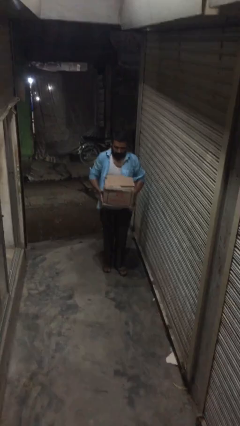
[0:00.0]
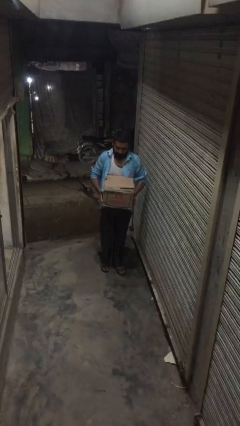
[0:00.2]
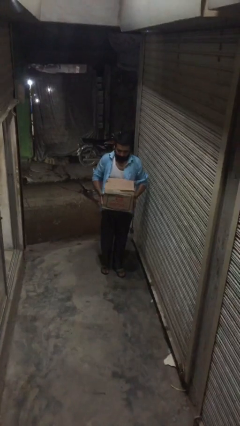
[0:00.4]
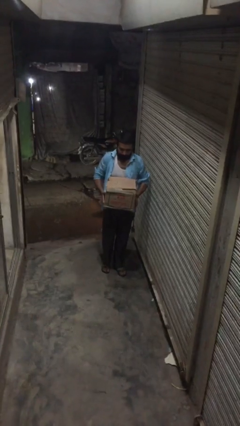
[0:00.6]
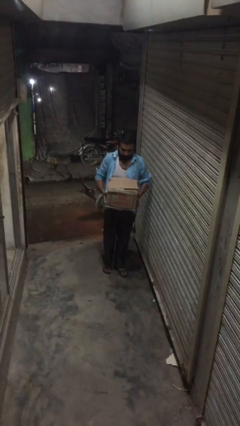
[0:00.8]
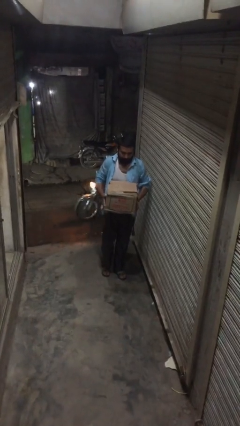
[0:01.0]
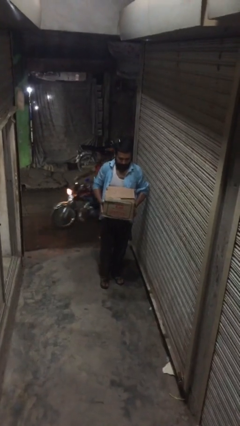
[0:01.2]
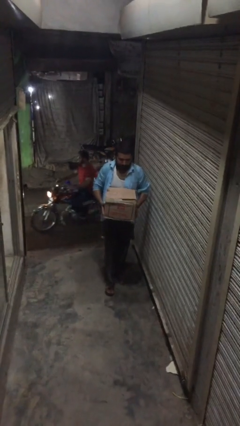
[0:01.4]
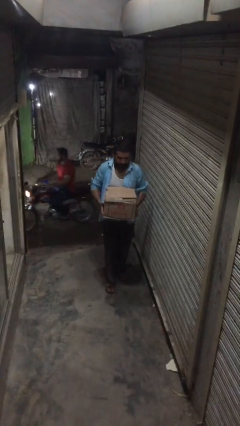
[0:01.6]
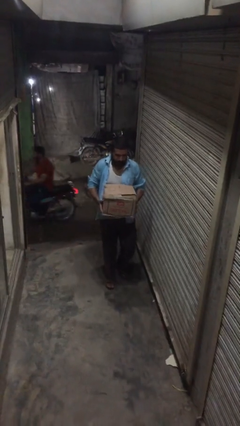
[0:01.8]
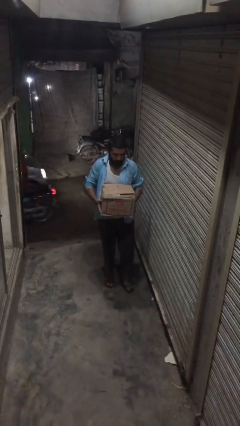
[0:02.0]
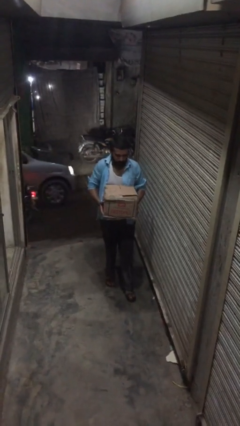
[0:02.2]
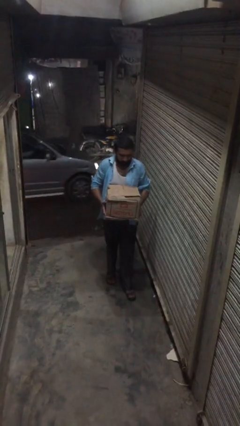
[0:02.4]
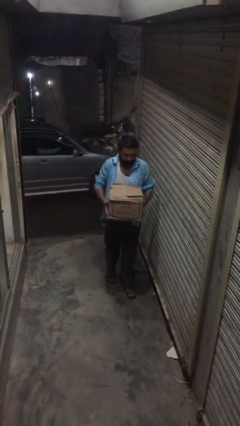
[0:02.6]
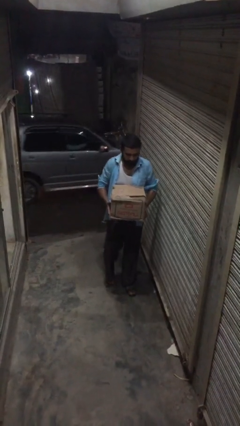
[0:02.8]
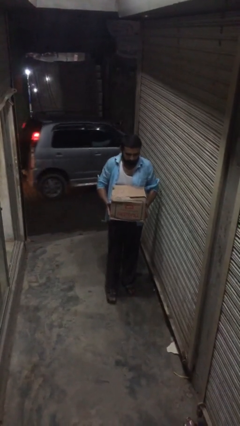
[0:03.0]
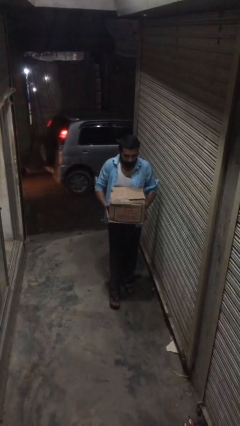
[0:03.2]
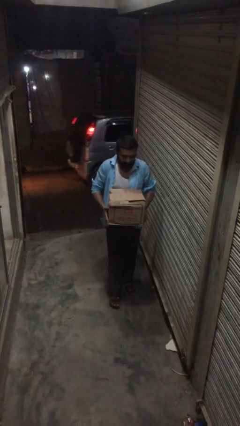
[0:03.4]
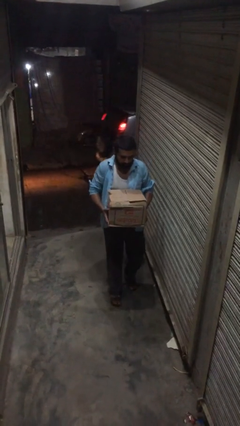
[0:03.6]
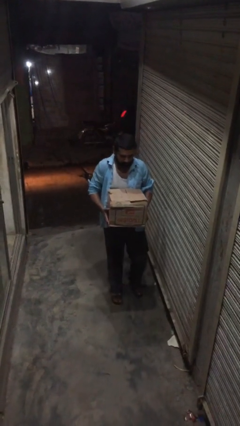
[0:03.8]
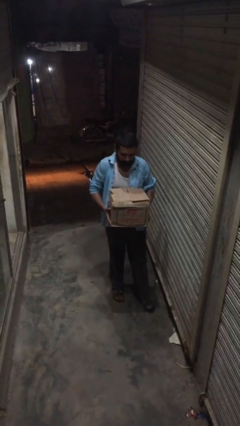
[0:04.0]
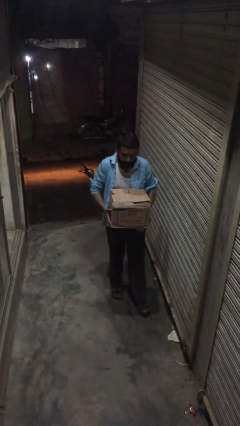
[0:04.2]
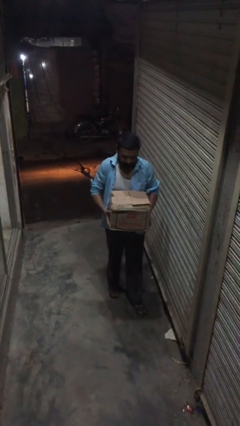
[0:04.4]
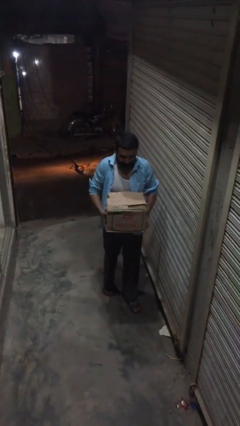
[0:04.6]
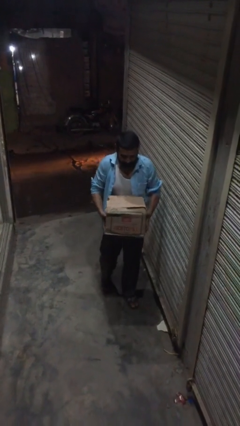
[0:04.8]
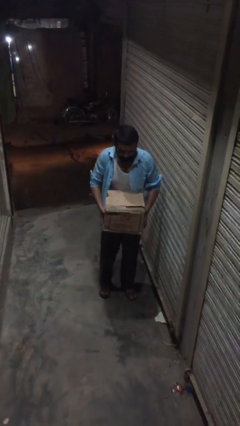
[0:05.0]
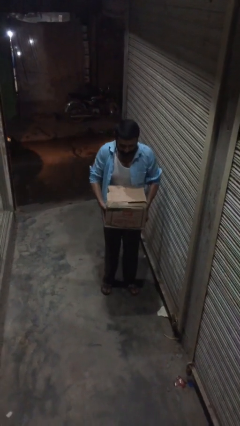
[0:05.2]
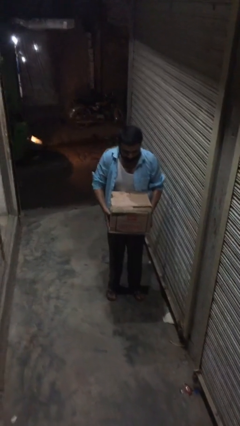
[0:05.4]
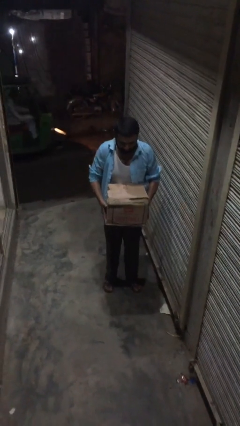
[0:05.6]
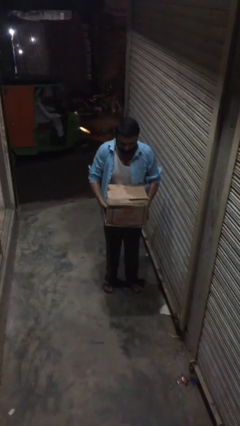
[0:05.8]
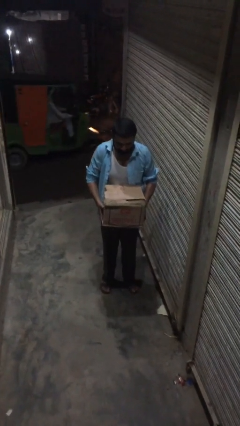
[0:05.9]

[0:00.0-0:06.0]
person carries heavy object

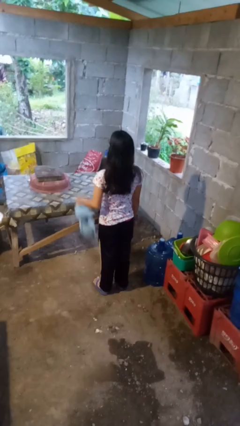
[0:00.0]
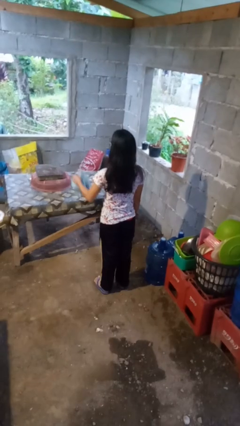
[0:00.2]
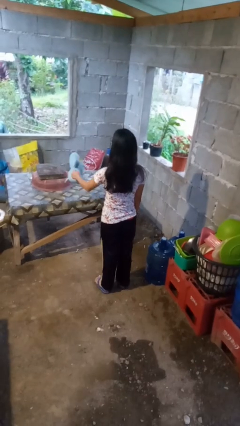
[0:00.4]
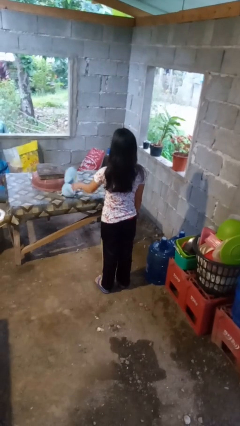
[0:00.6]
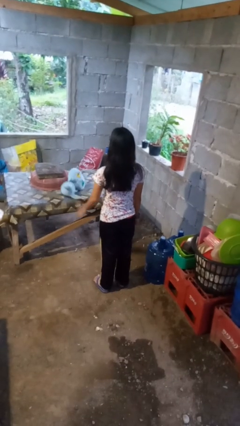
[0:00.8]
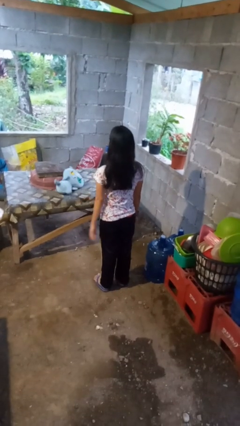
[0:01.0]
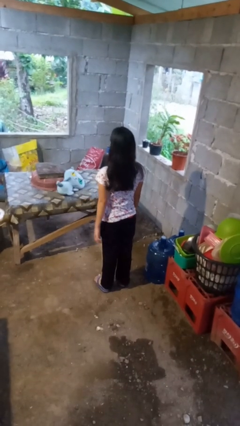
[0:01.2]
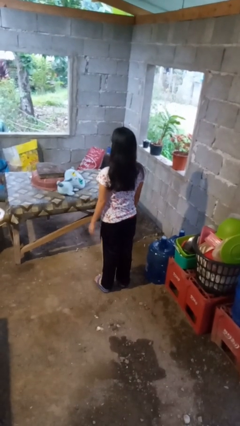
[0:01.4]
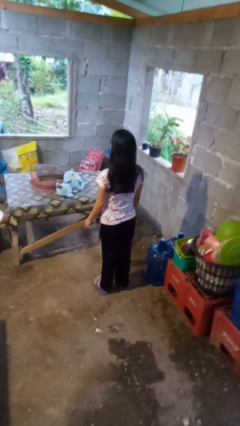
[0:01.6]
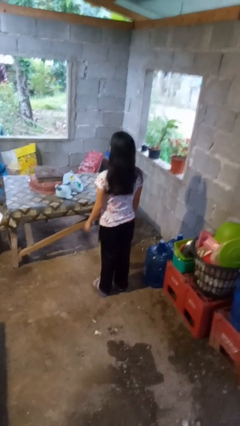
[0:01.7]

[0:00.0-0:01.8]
person throws object on table

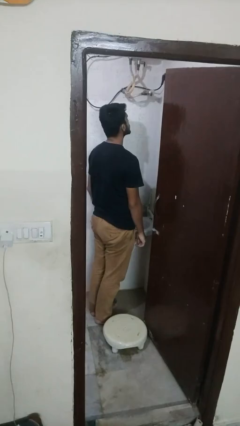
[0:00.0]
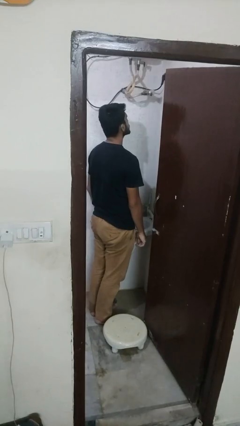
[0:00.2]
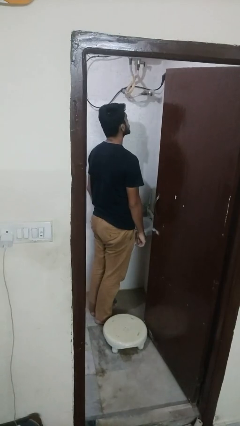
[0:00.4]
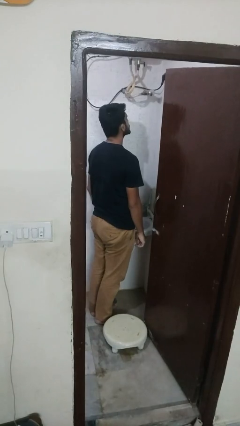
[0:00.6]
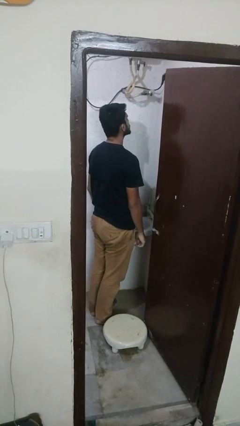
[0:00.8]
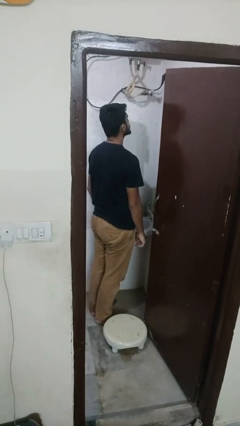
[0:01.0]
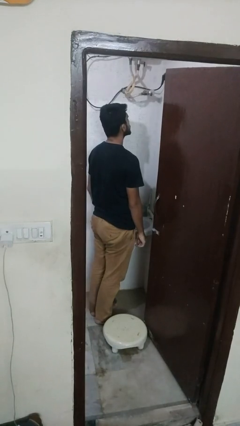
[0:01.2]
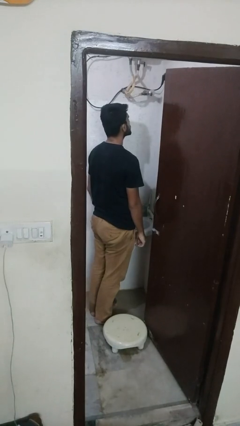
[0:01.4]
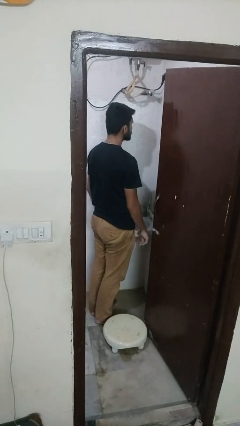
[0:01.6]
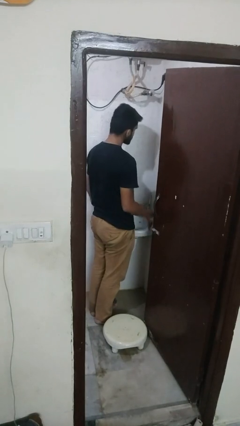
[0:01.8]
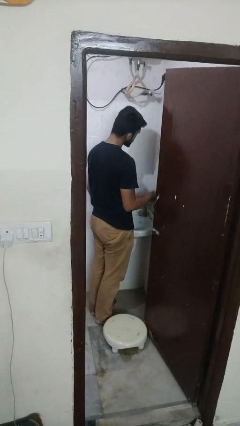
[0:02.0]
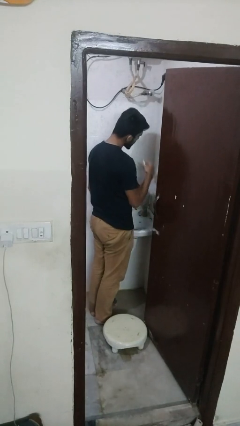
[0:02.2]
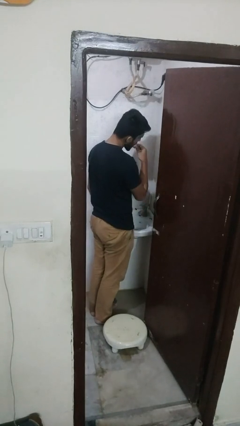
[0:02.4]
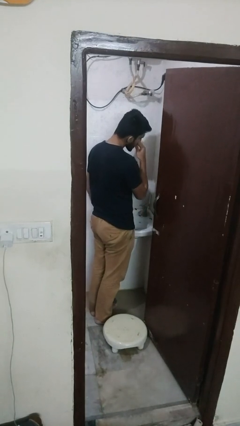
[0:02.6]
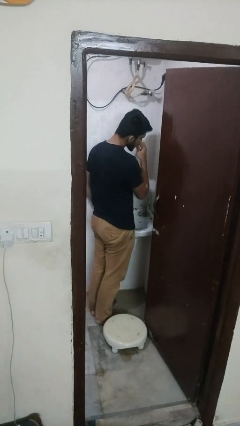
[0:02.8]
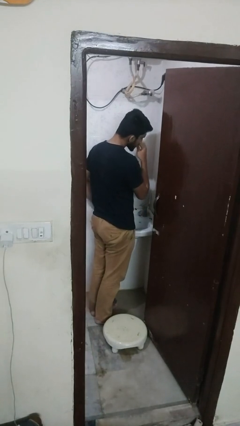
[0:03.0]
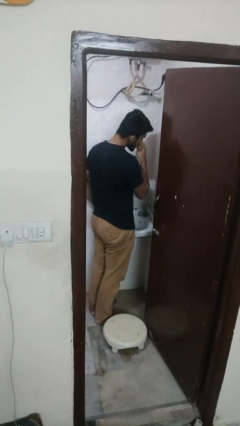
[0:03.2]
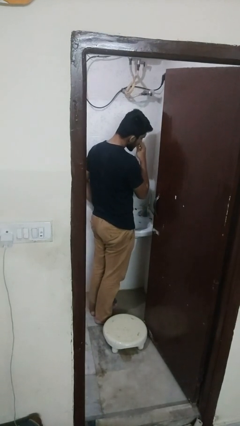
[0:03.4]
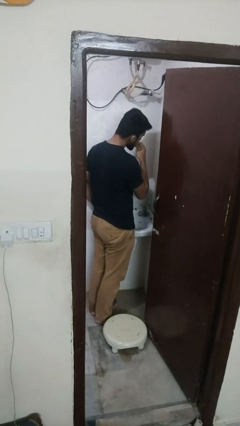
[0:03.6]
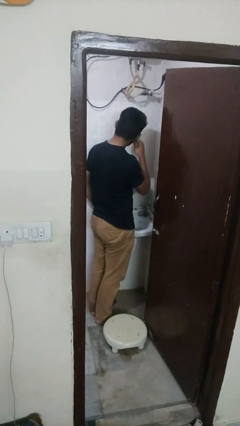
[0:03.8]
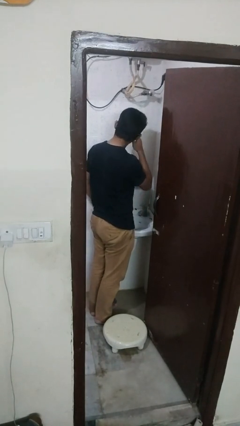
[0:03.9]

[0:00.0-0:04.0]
person flosses

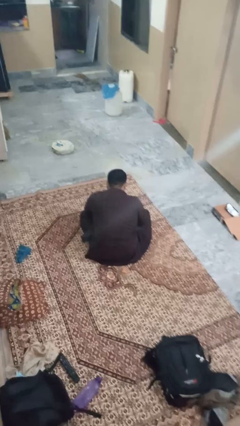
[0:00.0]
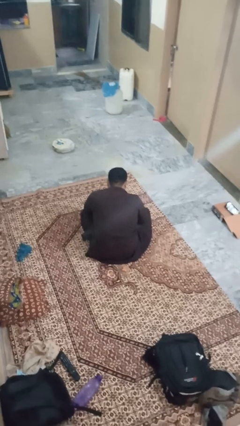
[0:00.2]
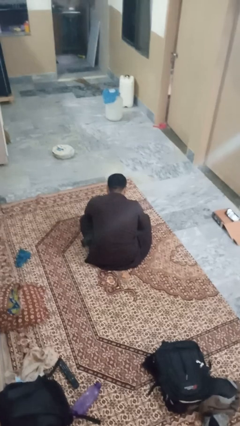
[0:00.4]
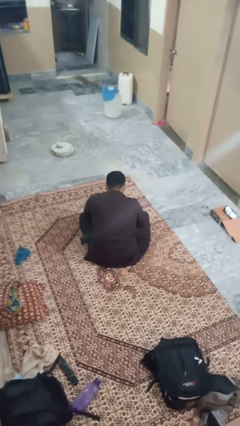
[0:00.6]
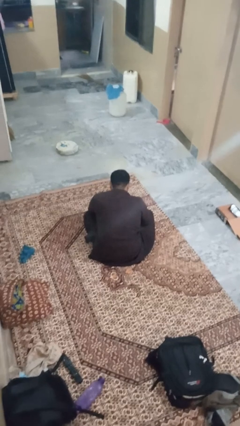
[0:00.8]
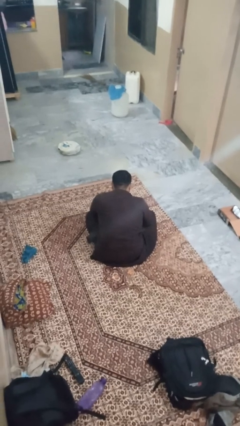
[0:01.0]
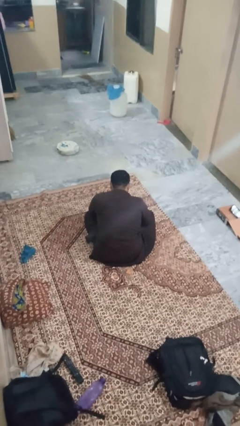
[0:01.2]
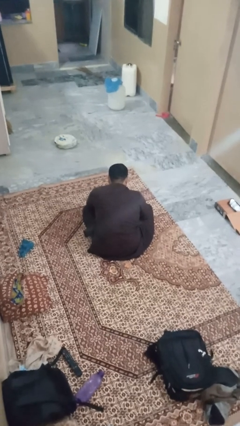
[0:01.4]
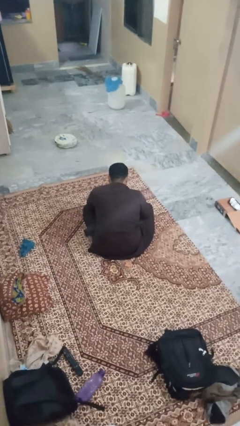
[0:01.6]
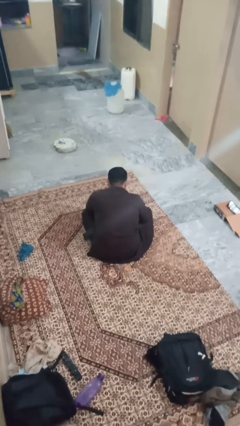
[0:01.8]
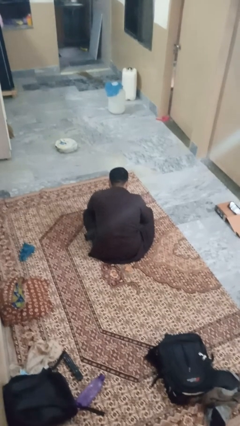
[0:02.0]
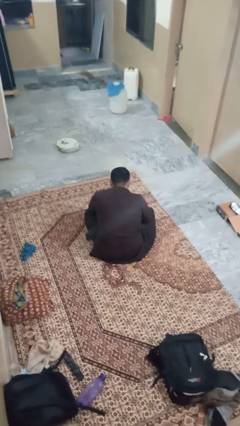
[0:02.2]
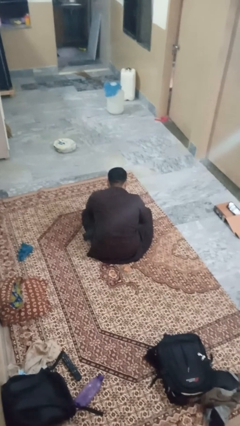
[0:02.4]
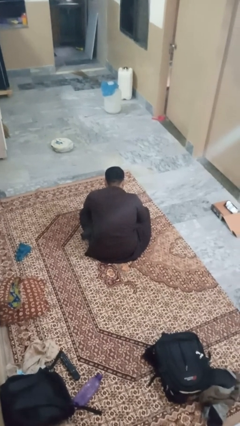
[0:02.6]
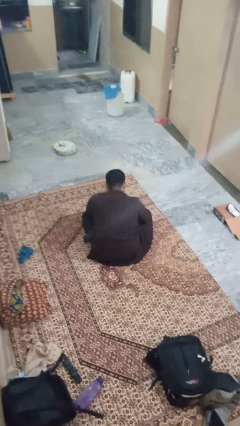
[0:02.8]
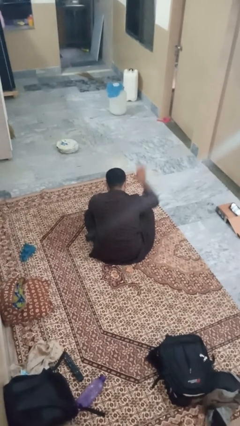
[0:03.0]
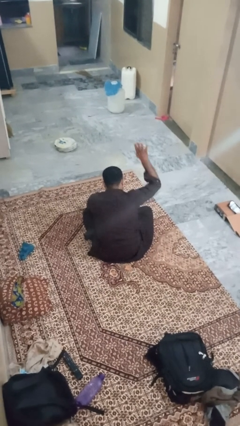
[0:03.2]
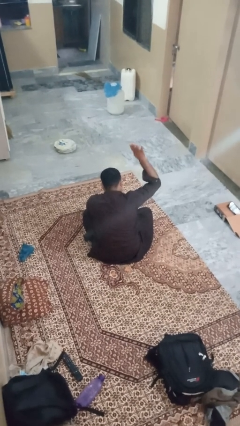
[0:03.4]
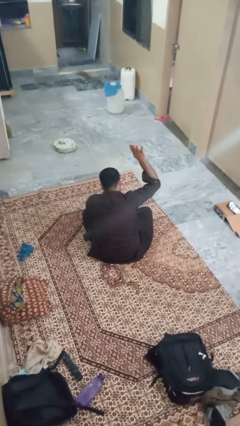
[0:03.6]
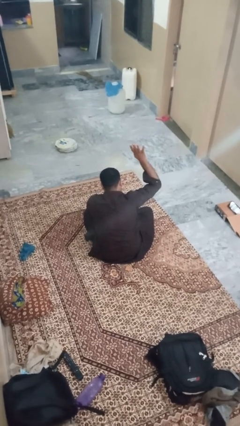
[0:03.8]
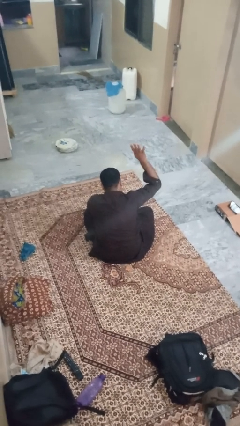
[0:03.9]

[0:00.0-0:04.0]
person gestures number four

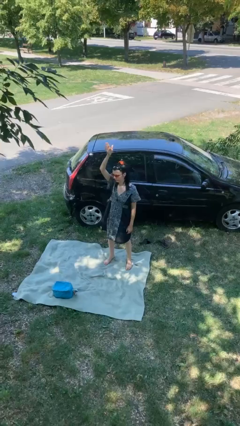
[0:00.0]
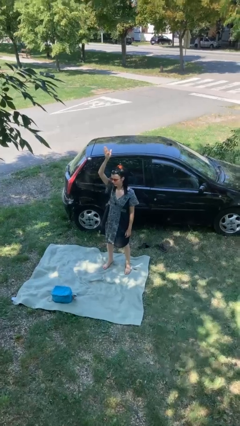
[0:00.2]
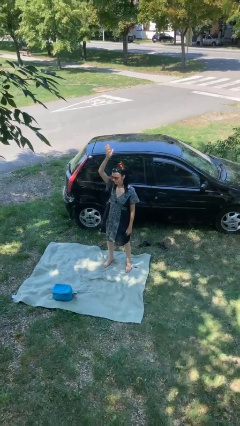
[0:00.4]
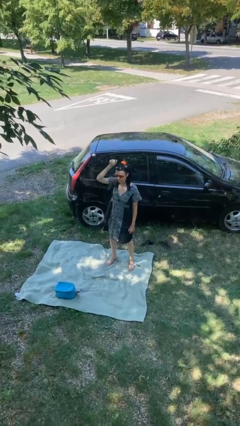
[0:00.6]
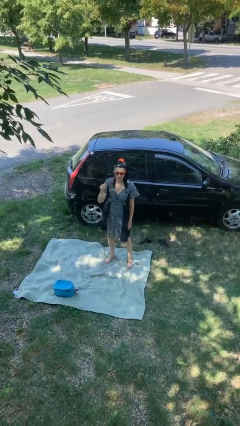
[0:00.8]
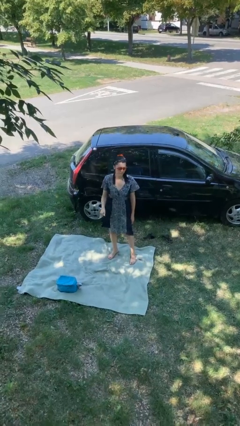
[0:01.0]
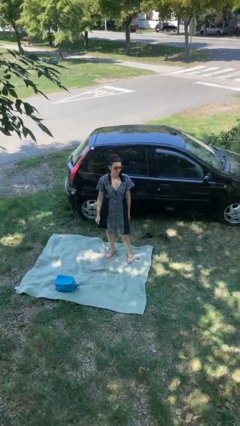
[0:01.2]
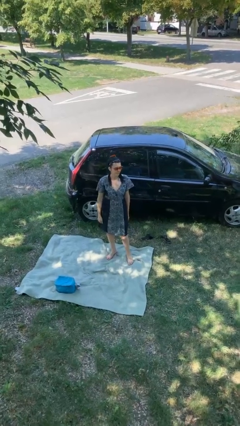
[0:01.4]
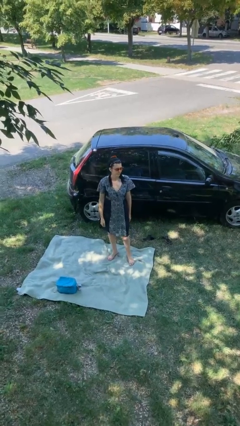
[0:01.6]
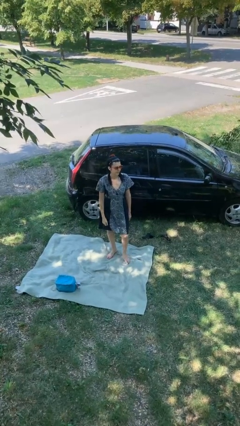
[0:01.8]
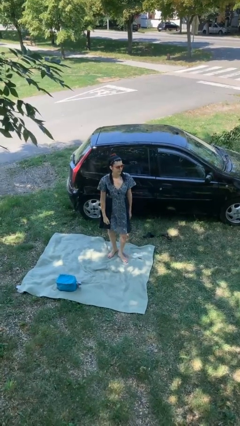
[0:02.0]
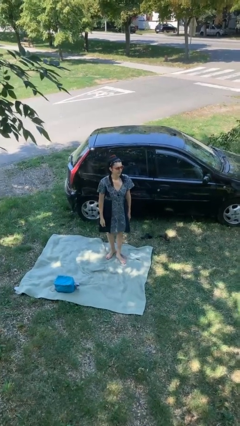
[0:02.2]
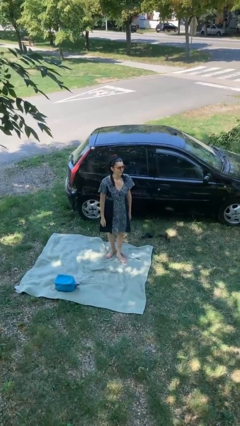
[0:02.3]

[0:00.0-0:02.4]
person gestures lower hand
